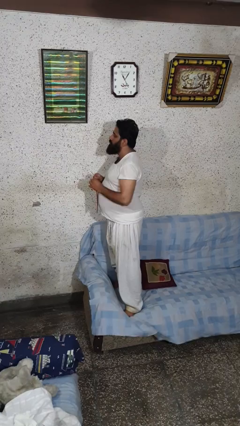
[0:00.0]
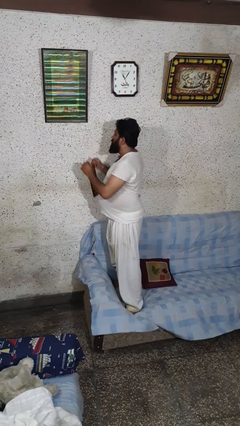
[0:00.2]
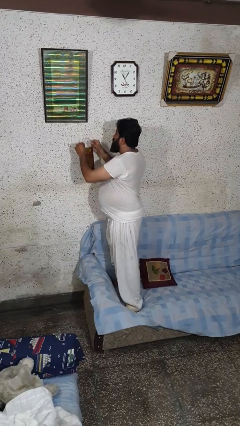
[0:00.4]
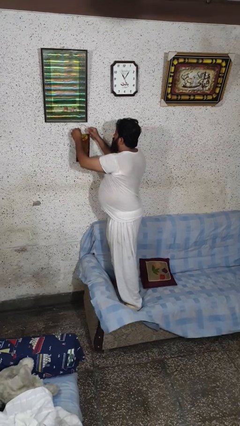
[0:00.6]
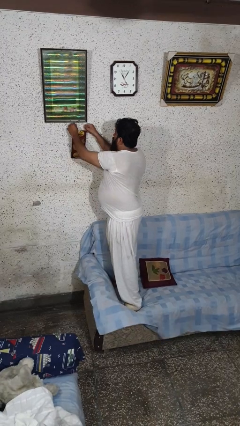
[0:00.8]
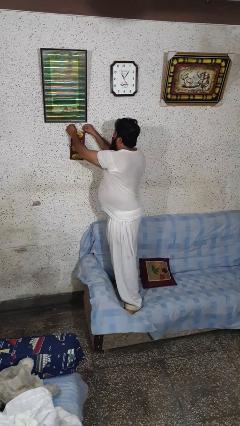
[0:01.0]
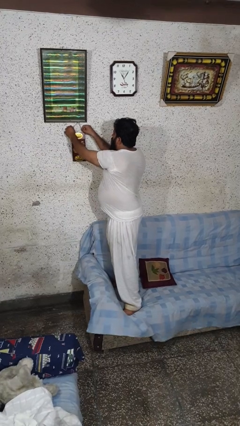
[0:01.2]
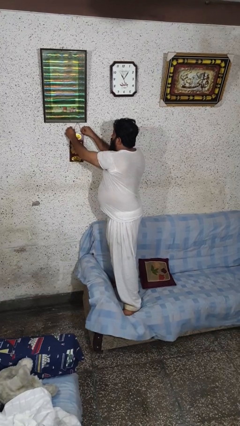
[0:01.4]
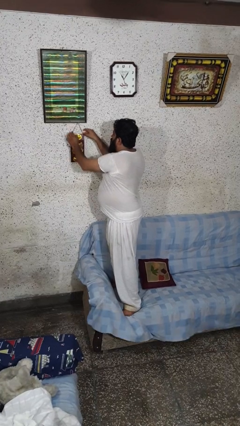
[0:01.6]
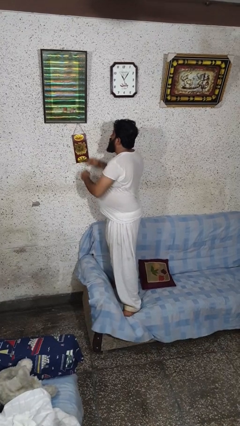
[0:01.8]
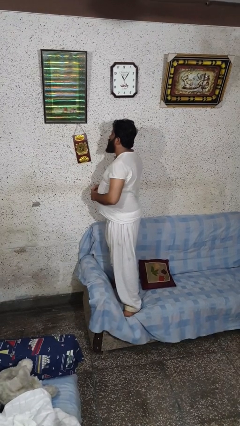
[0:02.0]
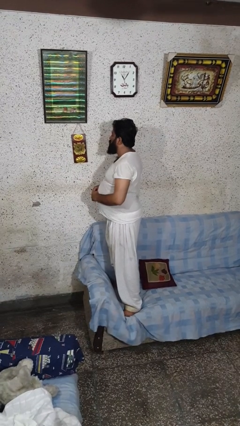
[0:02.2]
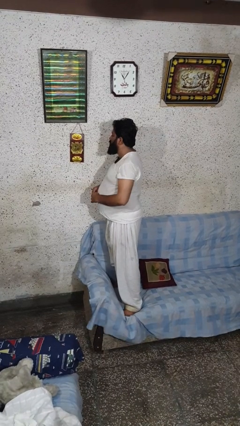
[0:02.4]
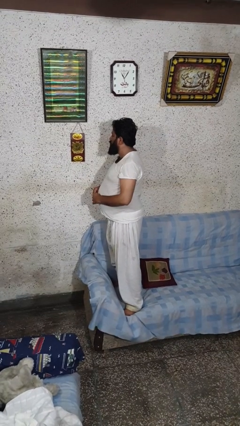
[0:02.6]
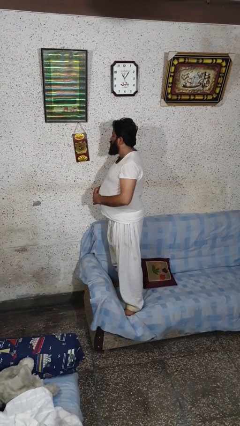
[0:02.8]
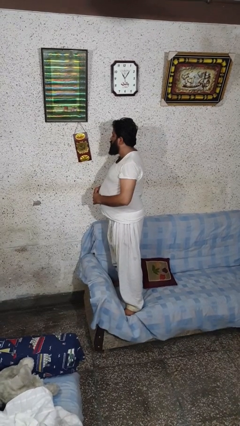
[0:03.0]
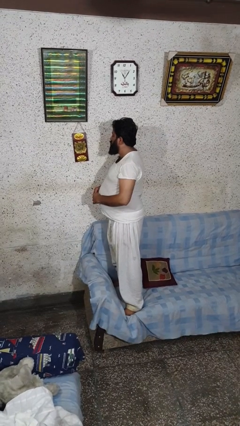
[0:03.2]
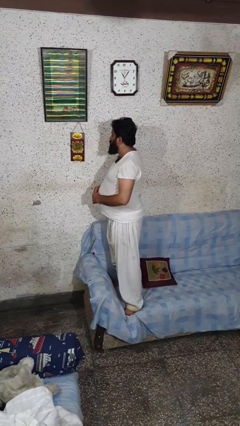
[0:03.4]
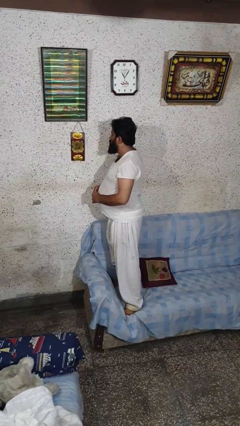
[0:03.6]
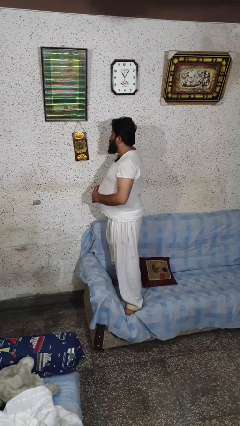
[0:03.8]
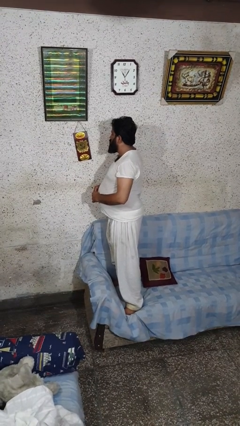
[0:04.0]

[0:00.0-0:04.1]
person puts up picture frame

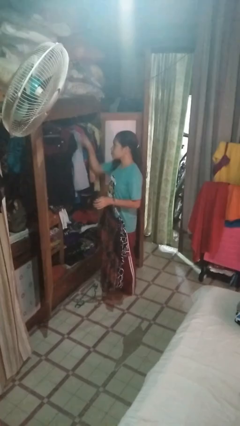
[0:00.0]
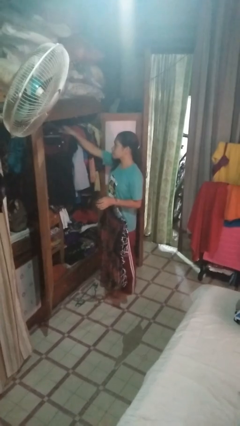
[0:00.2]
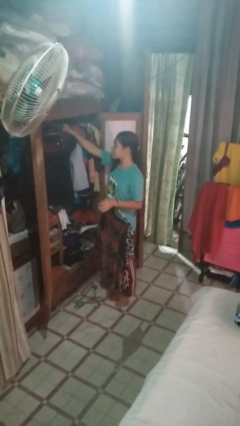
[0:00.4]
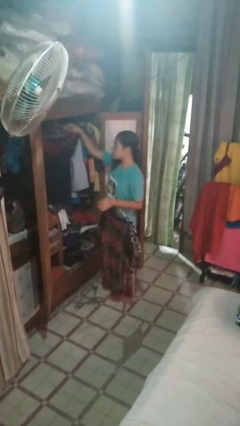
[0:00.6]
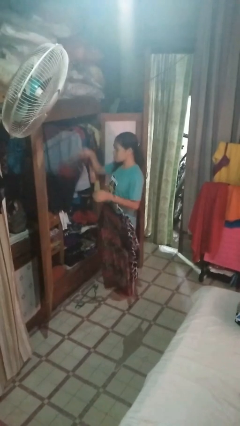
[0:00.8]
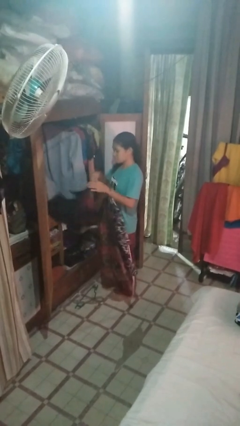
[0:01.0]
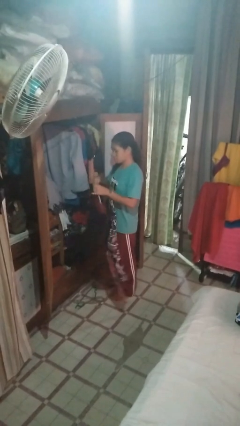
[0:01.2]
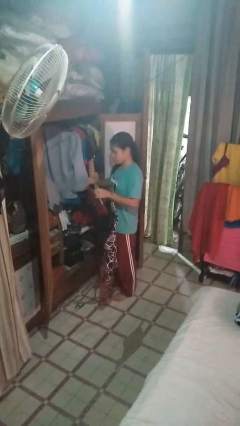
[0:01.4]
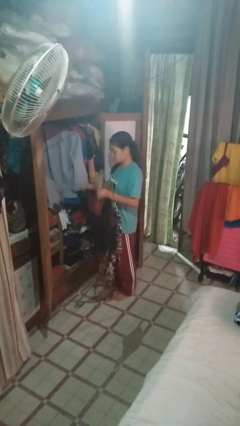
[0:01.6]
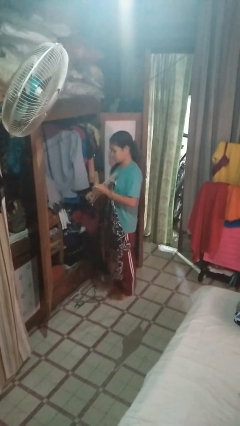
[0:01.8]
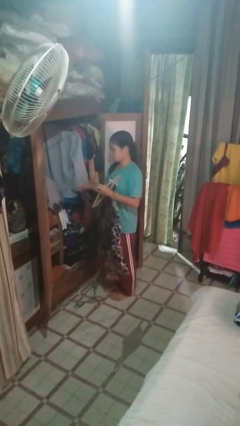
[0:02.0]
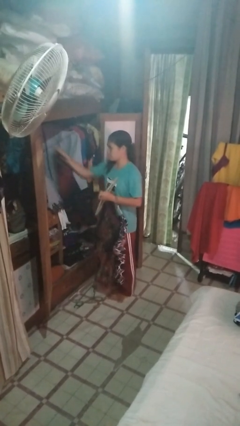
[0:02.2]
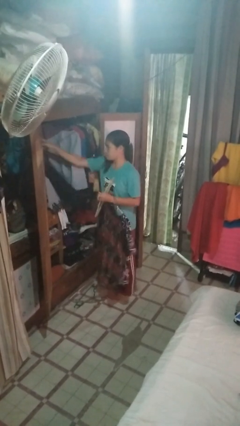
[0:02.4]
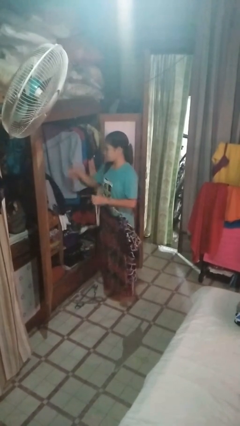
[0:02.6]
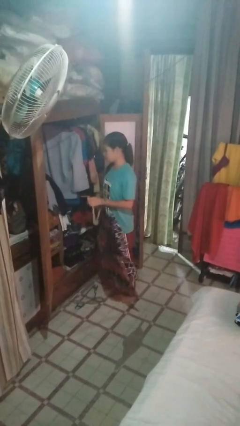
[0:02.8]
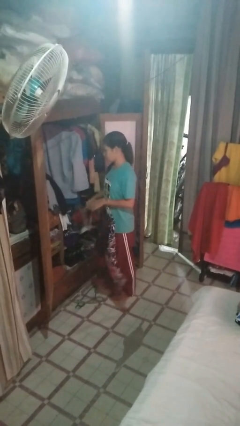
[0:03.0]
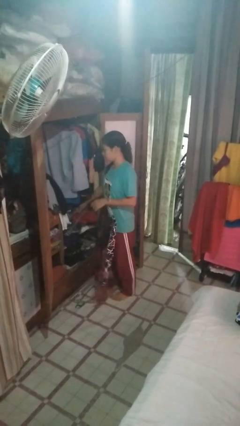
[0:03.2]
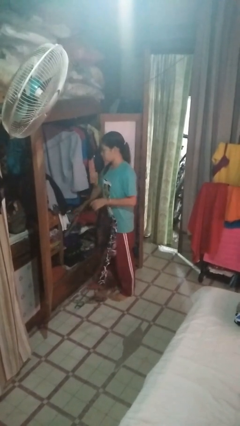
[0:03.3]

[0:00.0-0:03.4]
person takes clothes from closet

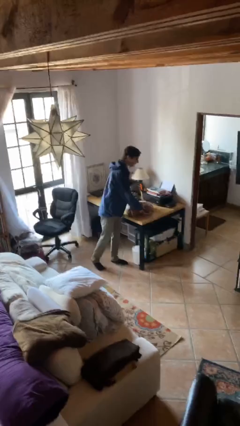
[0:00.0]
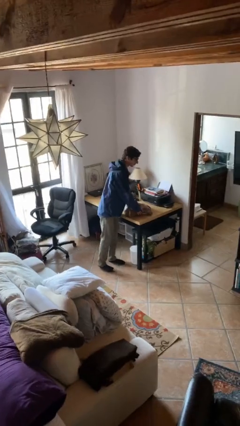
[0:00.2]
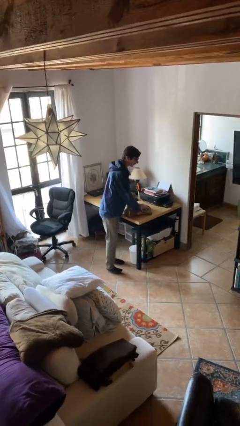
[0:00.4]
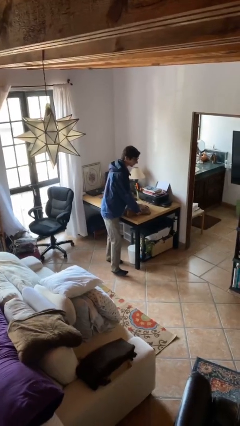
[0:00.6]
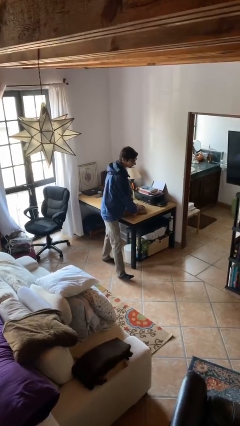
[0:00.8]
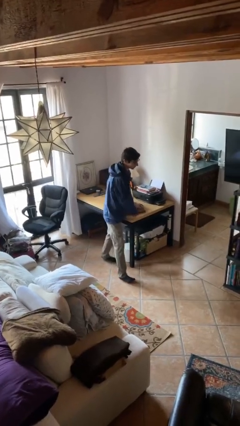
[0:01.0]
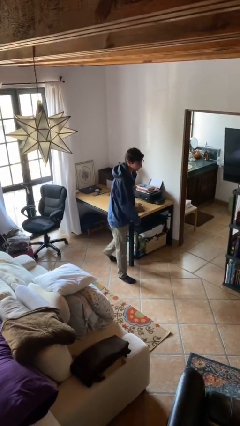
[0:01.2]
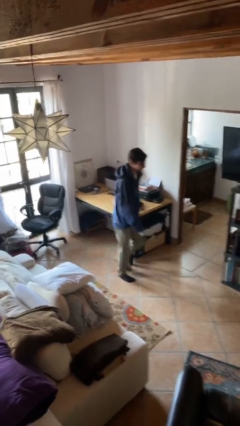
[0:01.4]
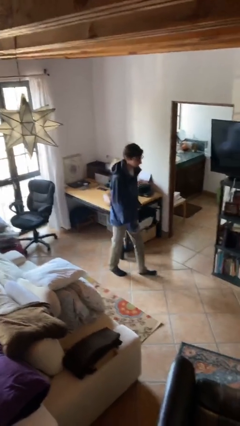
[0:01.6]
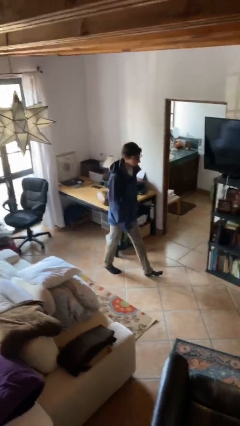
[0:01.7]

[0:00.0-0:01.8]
person puts down object on table

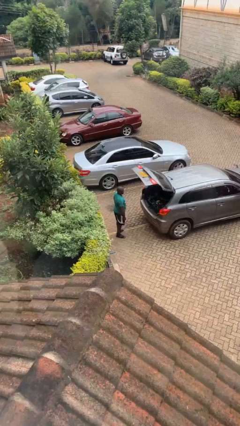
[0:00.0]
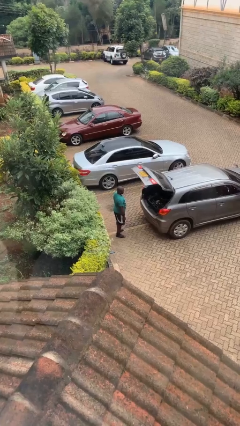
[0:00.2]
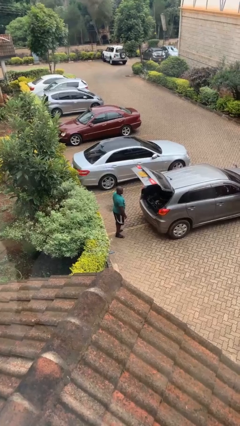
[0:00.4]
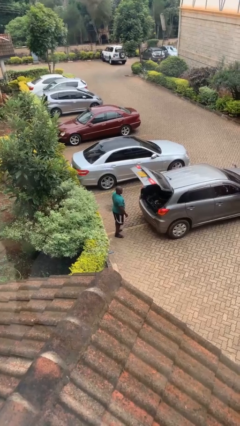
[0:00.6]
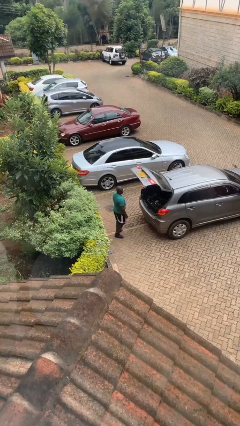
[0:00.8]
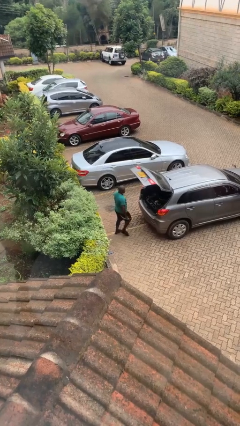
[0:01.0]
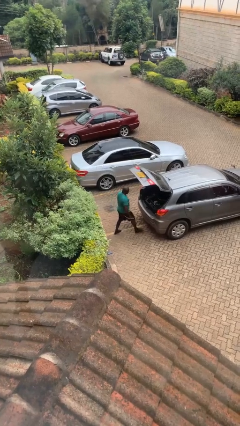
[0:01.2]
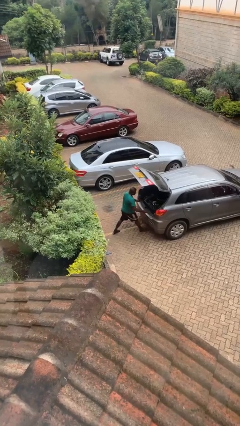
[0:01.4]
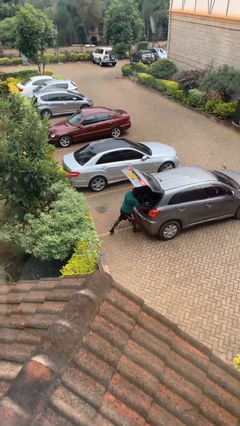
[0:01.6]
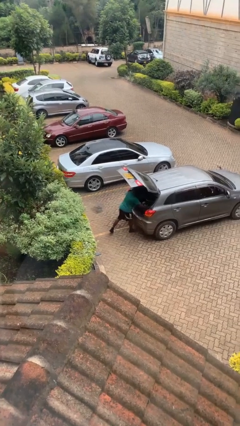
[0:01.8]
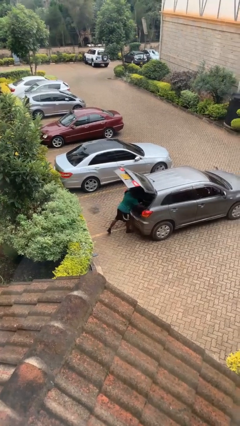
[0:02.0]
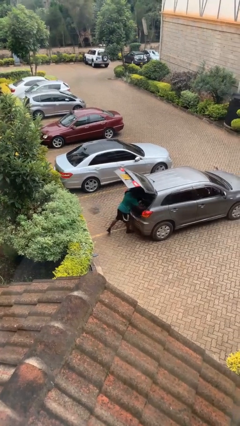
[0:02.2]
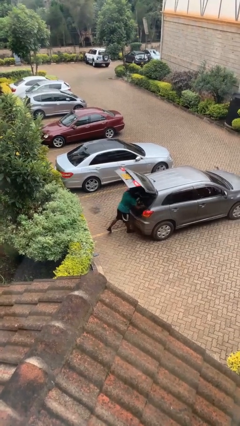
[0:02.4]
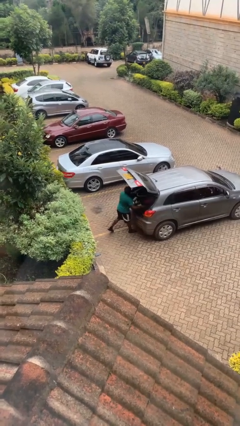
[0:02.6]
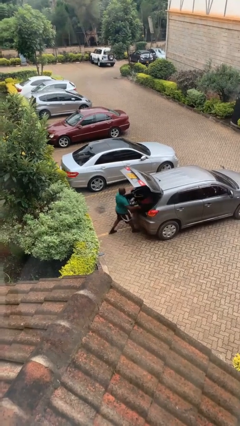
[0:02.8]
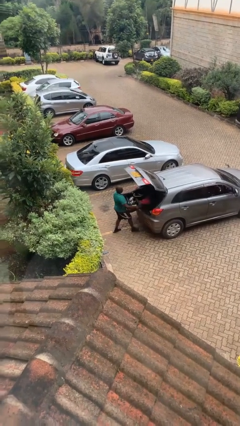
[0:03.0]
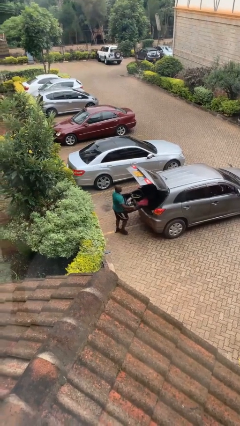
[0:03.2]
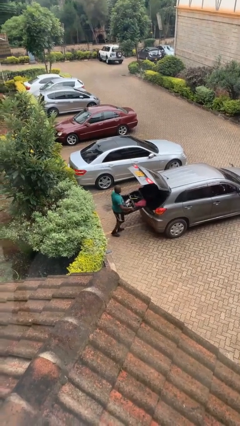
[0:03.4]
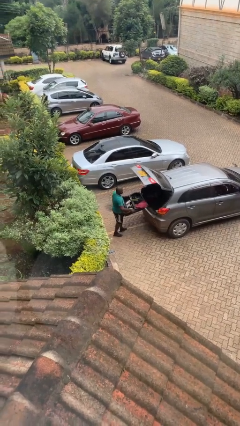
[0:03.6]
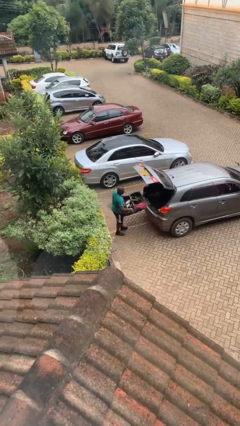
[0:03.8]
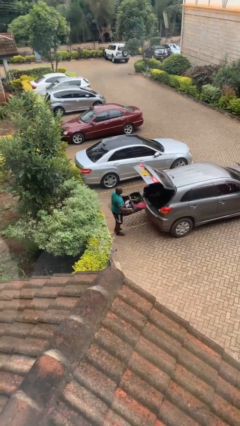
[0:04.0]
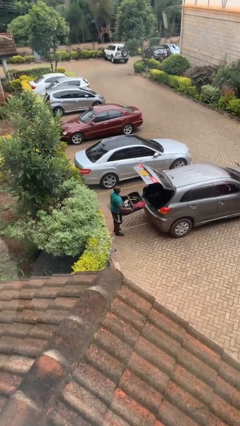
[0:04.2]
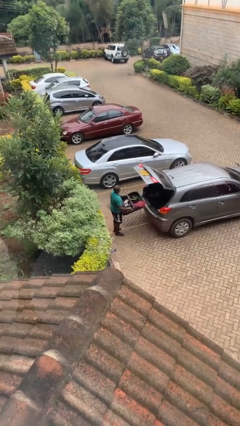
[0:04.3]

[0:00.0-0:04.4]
person unloads car

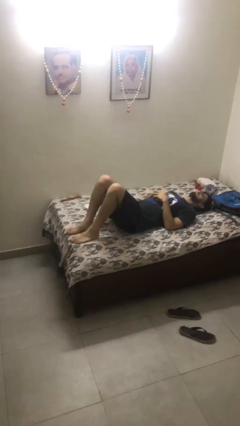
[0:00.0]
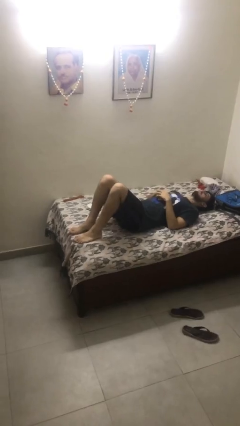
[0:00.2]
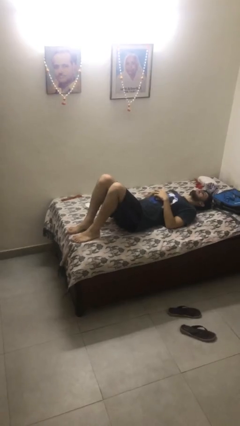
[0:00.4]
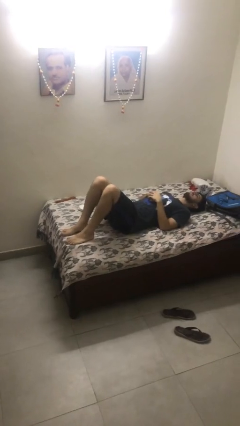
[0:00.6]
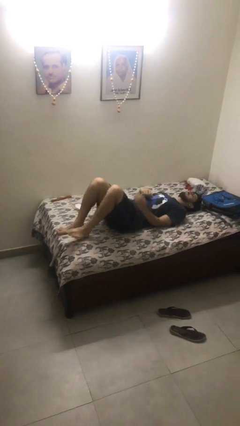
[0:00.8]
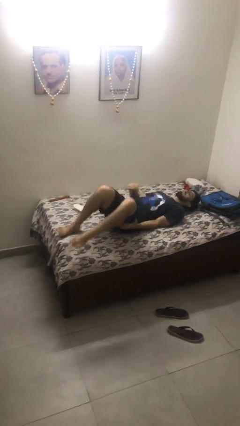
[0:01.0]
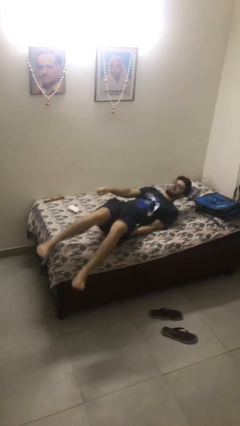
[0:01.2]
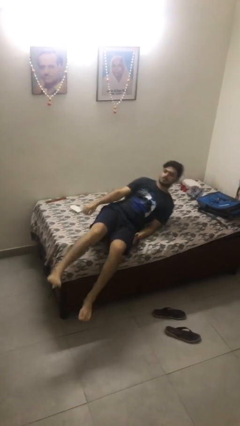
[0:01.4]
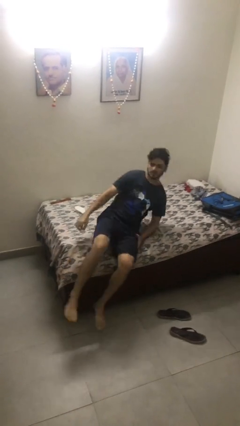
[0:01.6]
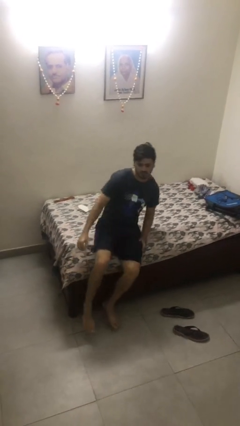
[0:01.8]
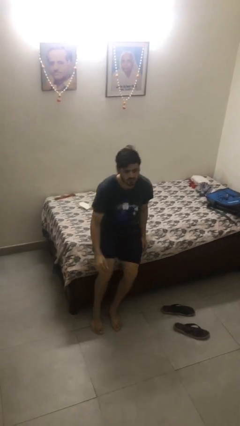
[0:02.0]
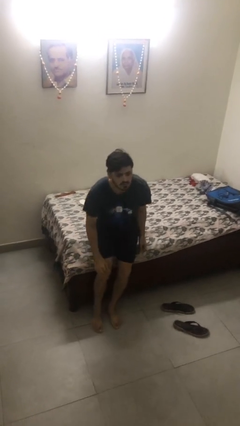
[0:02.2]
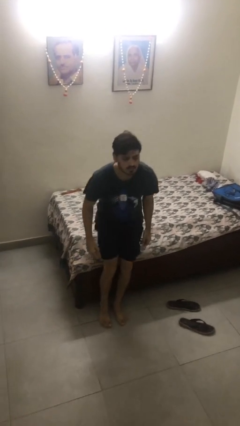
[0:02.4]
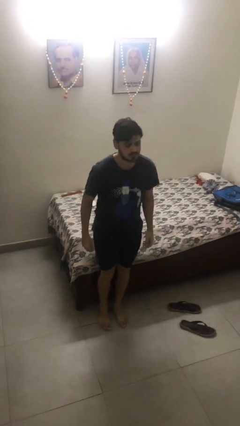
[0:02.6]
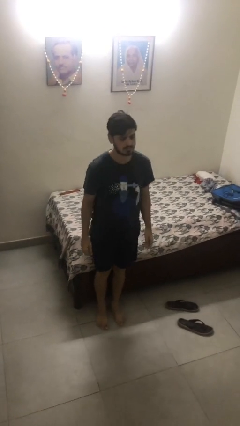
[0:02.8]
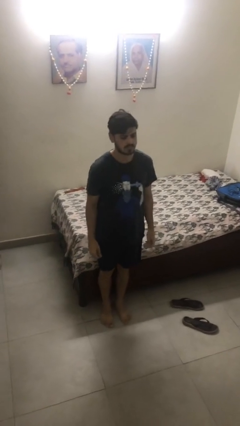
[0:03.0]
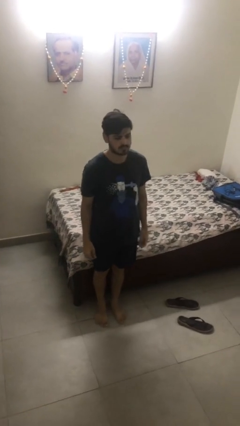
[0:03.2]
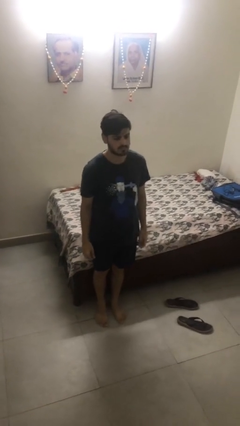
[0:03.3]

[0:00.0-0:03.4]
person stands up

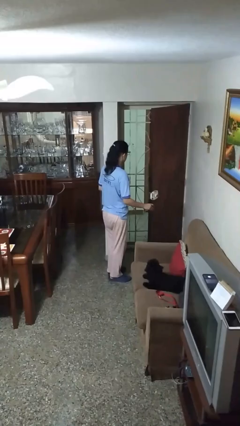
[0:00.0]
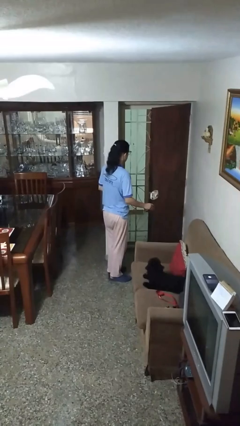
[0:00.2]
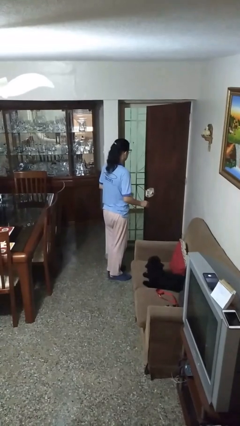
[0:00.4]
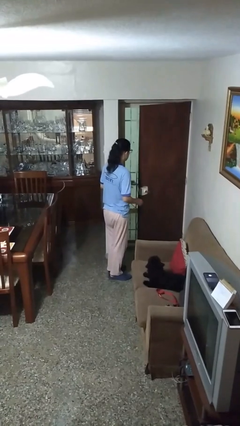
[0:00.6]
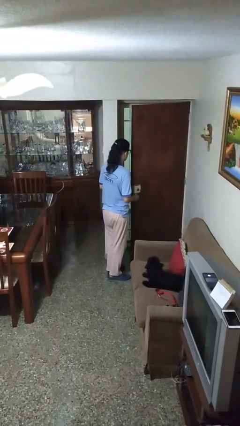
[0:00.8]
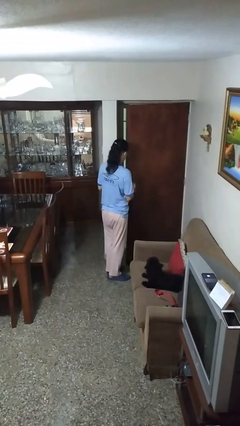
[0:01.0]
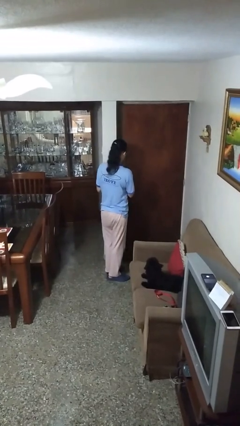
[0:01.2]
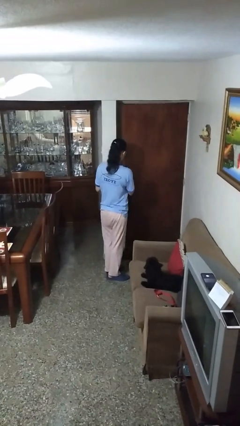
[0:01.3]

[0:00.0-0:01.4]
person closes facility door
